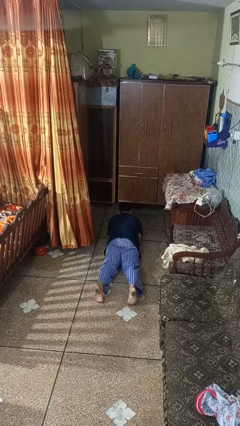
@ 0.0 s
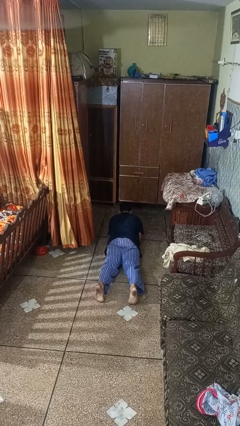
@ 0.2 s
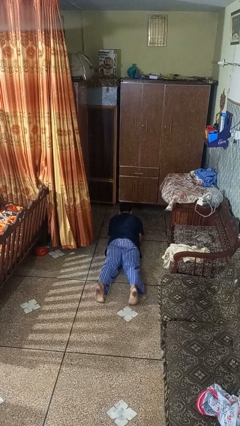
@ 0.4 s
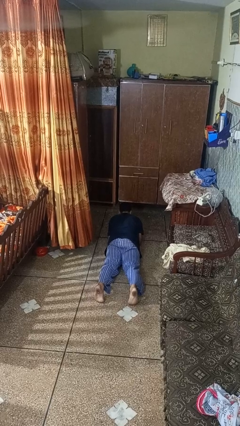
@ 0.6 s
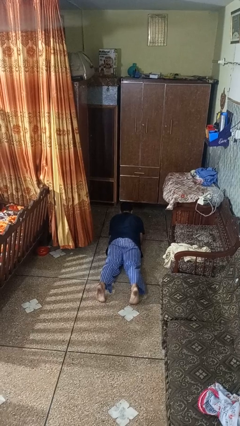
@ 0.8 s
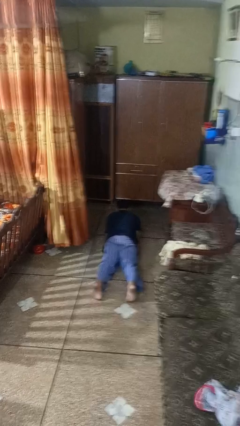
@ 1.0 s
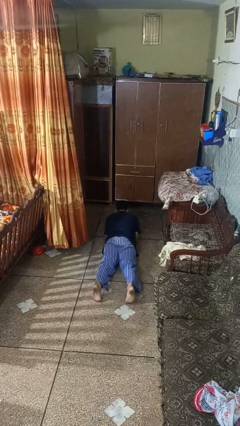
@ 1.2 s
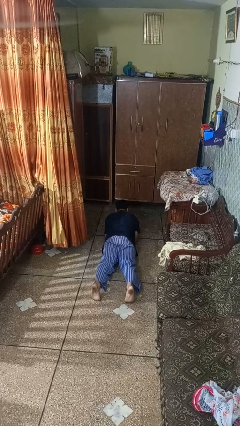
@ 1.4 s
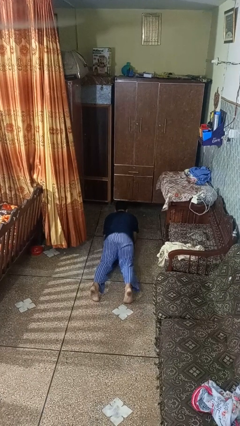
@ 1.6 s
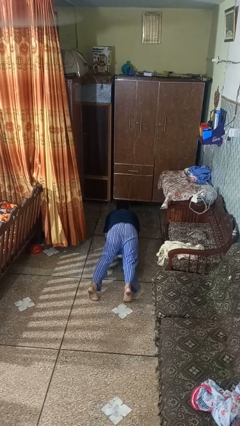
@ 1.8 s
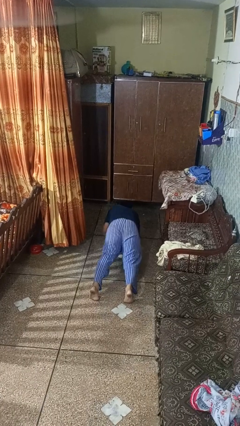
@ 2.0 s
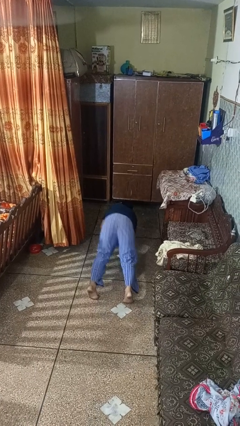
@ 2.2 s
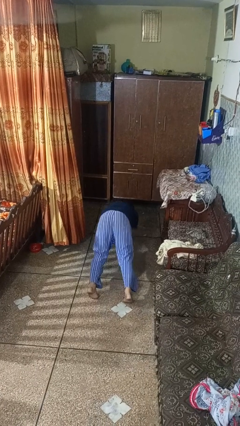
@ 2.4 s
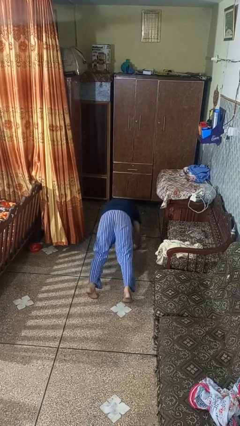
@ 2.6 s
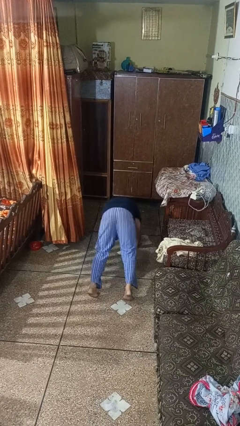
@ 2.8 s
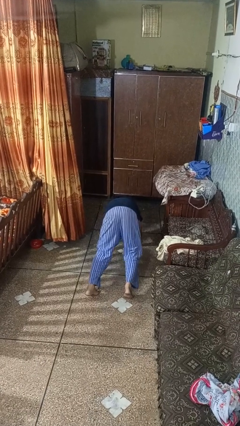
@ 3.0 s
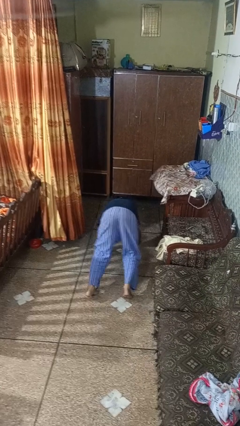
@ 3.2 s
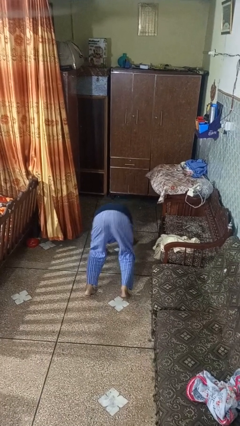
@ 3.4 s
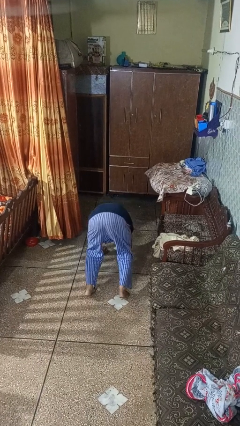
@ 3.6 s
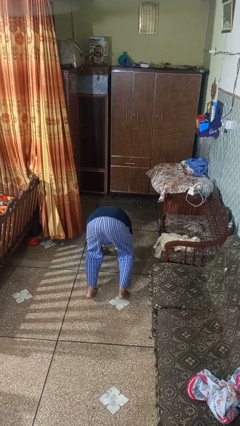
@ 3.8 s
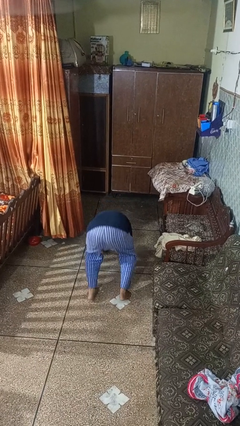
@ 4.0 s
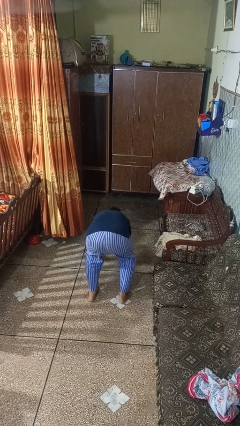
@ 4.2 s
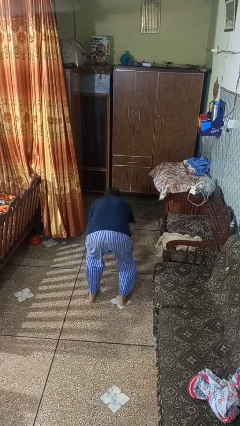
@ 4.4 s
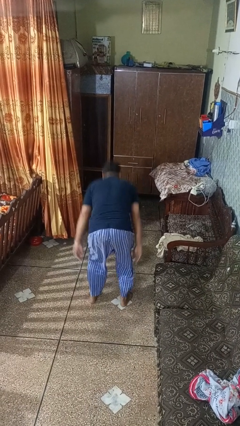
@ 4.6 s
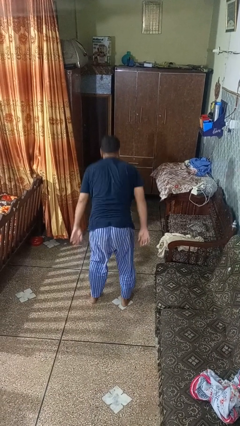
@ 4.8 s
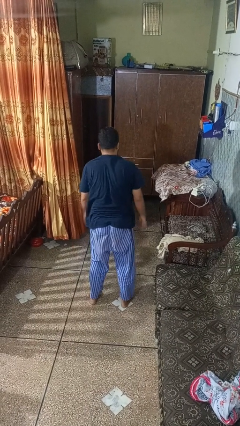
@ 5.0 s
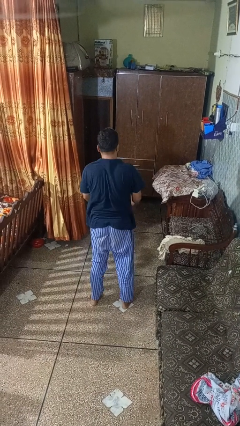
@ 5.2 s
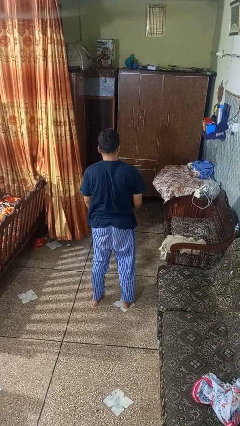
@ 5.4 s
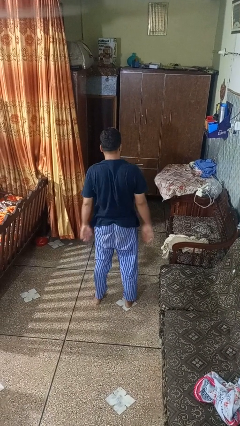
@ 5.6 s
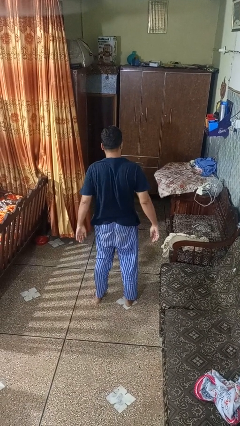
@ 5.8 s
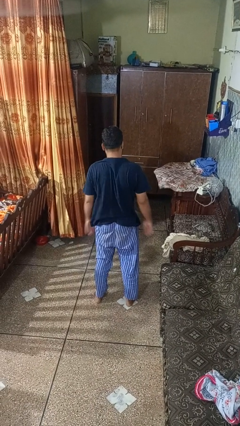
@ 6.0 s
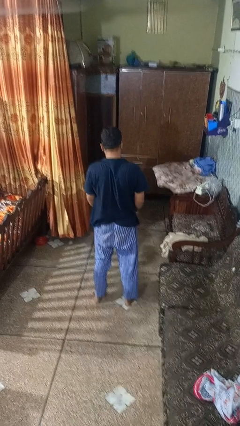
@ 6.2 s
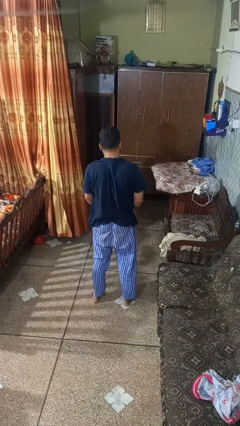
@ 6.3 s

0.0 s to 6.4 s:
person stands up from floor

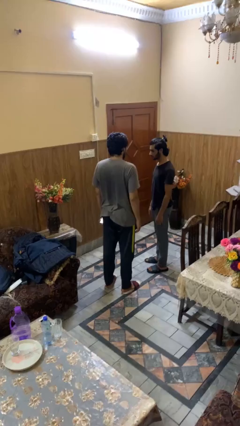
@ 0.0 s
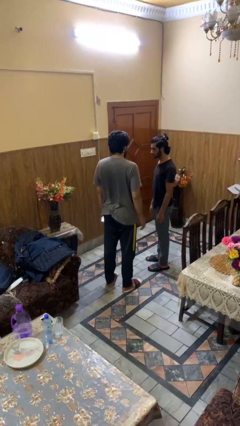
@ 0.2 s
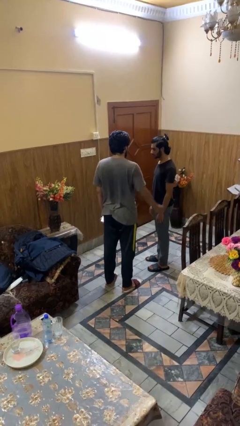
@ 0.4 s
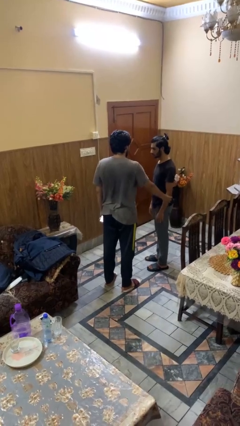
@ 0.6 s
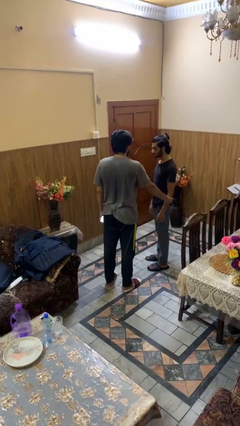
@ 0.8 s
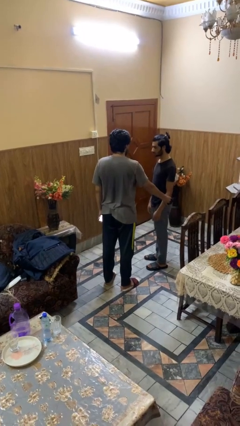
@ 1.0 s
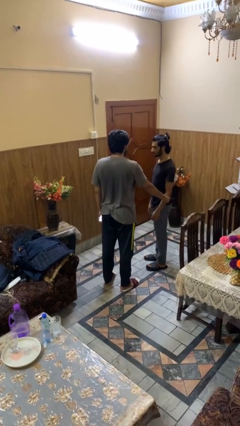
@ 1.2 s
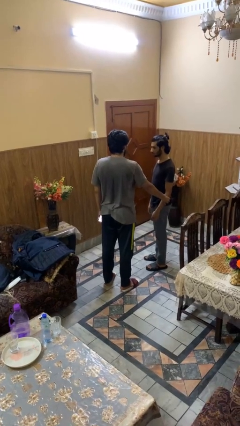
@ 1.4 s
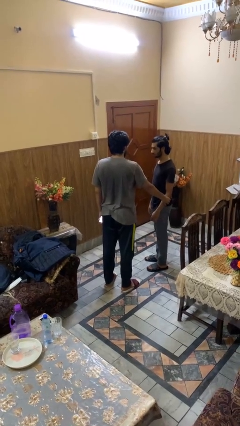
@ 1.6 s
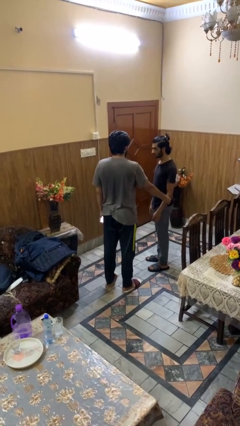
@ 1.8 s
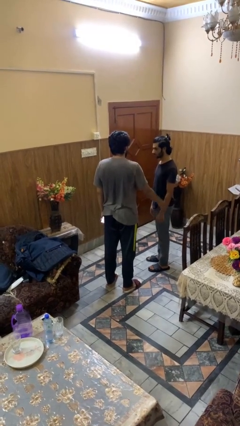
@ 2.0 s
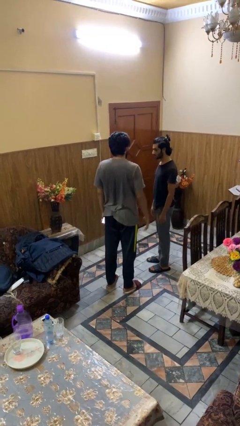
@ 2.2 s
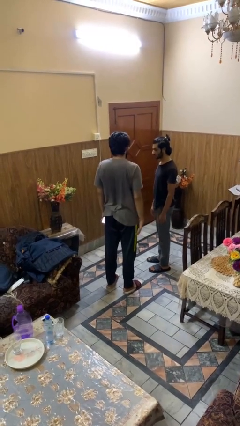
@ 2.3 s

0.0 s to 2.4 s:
person grabs person by forearm

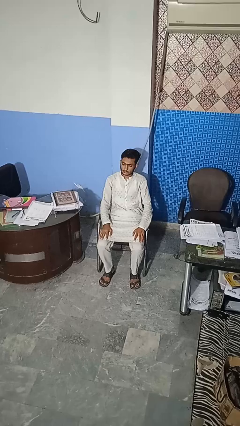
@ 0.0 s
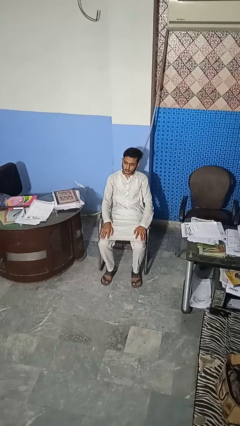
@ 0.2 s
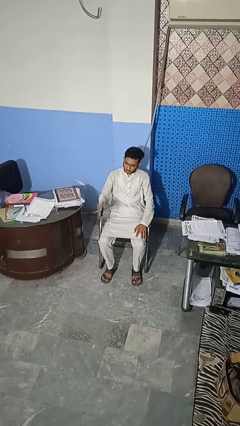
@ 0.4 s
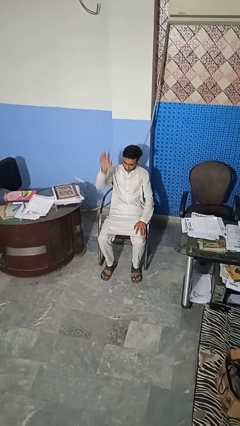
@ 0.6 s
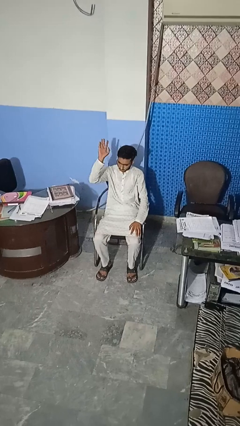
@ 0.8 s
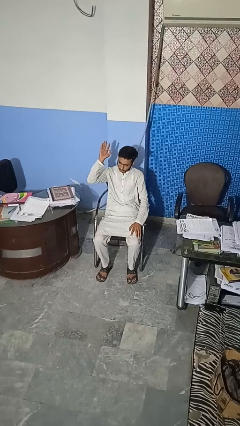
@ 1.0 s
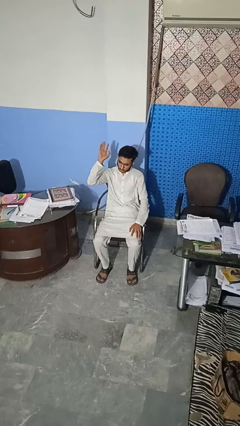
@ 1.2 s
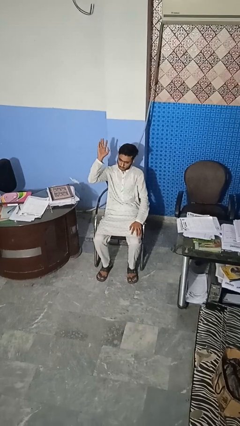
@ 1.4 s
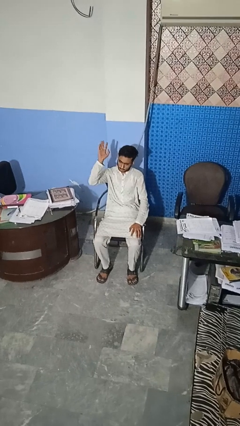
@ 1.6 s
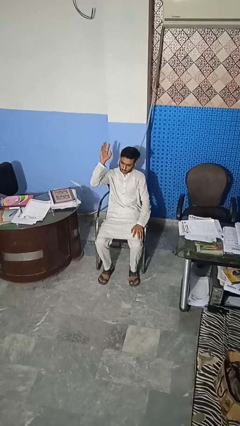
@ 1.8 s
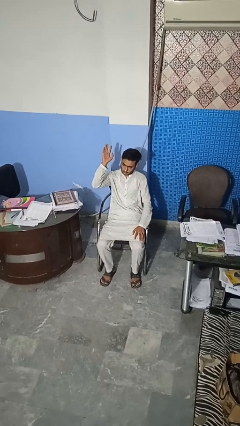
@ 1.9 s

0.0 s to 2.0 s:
person gestures raise hand

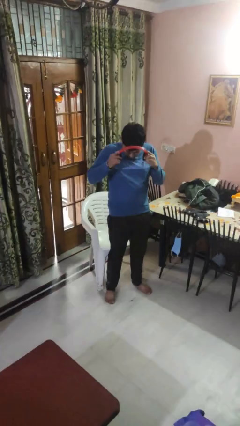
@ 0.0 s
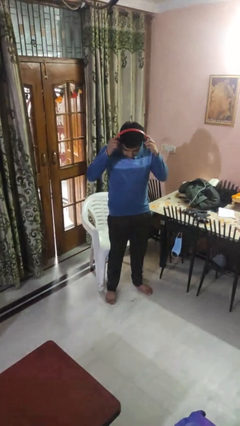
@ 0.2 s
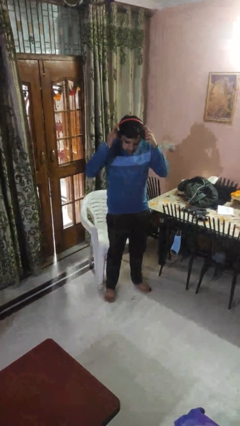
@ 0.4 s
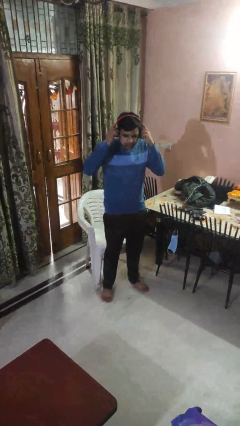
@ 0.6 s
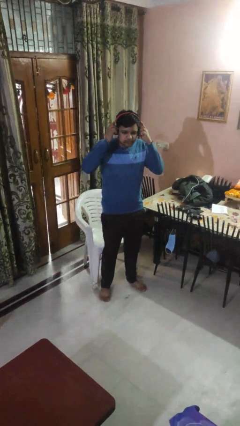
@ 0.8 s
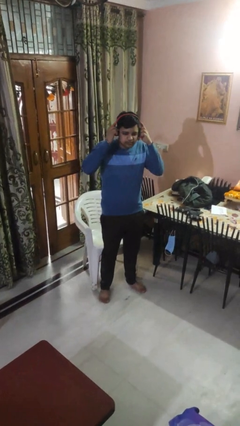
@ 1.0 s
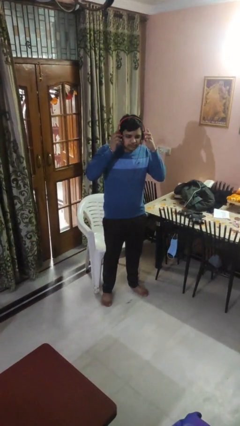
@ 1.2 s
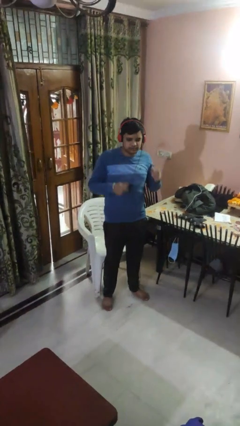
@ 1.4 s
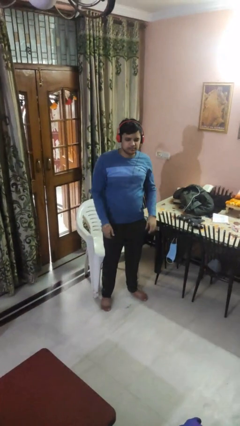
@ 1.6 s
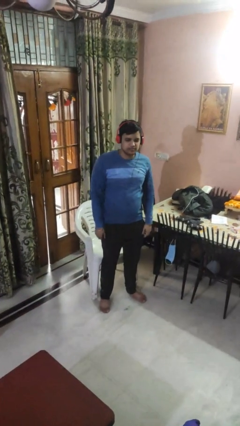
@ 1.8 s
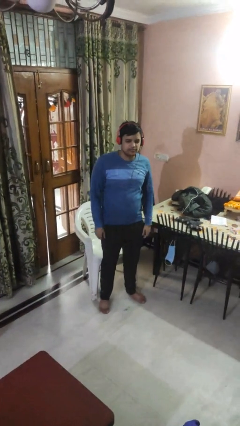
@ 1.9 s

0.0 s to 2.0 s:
person puts on headphones

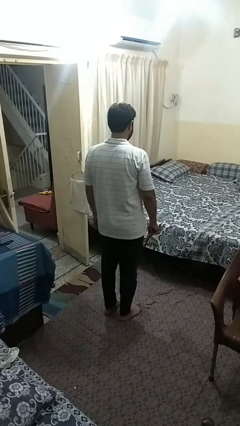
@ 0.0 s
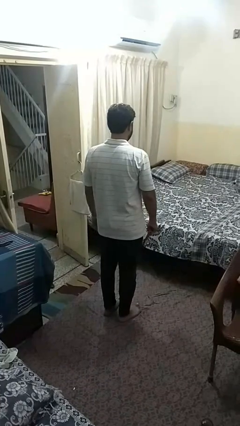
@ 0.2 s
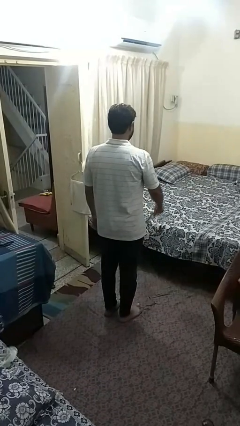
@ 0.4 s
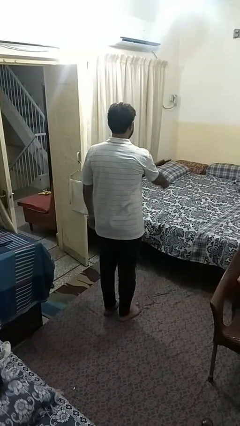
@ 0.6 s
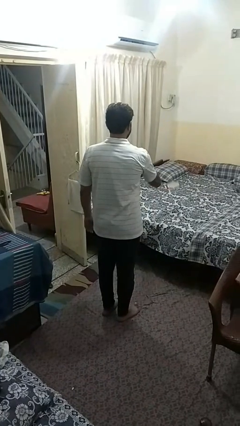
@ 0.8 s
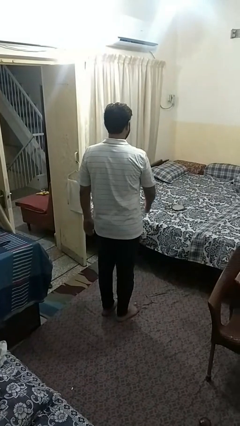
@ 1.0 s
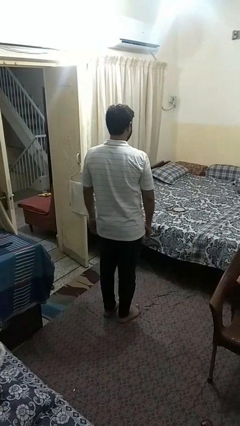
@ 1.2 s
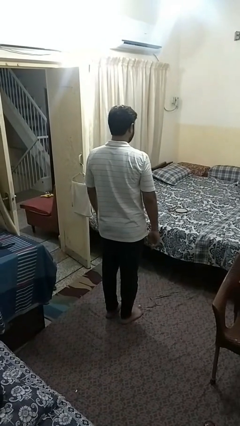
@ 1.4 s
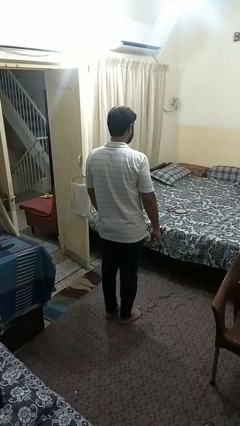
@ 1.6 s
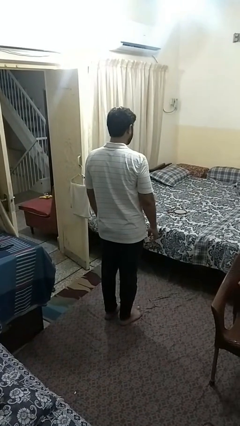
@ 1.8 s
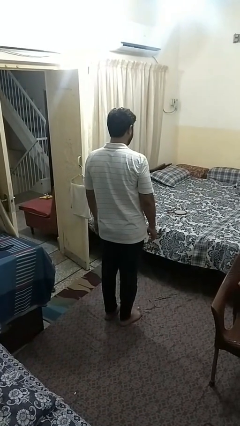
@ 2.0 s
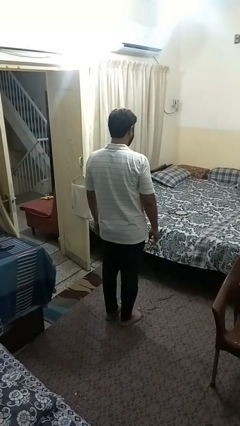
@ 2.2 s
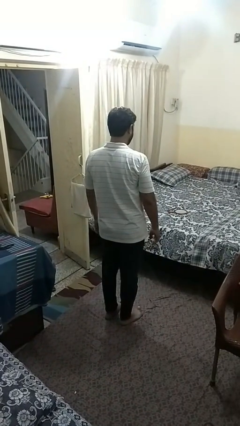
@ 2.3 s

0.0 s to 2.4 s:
person throws object on bed

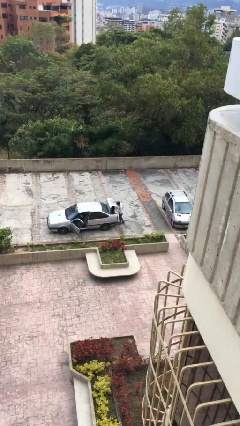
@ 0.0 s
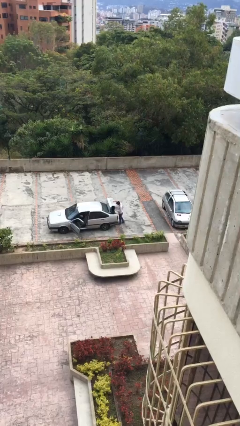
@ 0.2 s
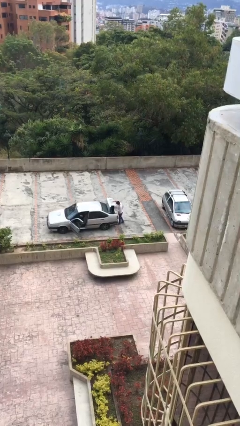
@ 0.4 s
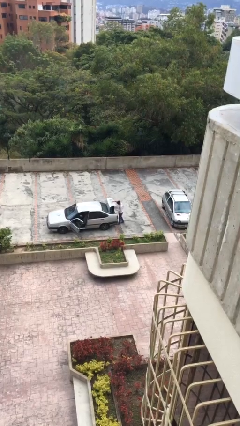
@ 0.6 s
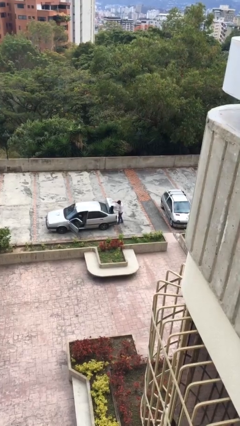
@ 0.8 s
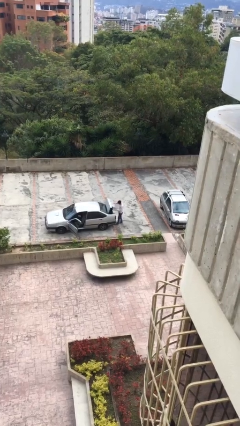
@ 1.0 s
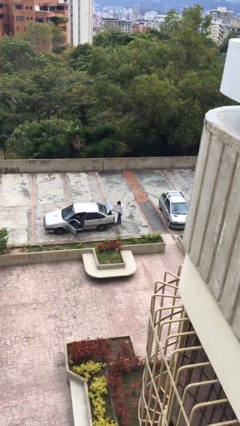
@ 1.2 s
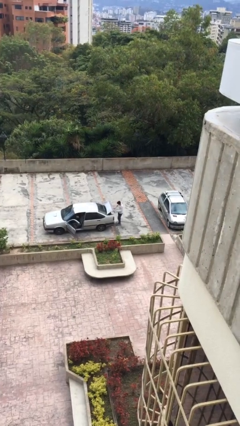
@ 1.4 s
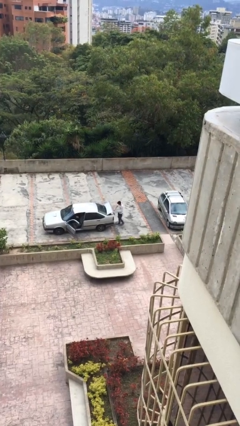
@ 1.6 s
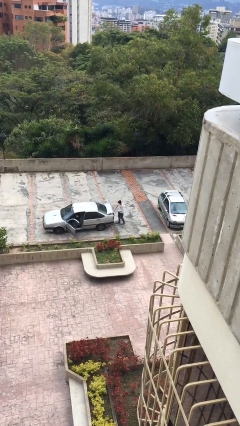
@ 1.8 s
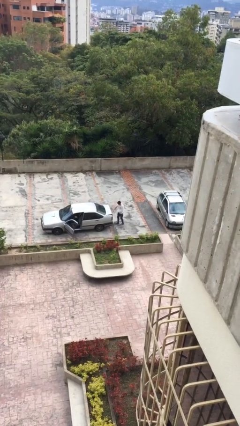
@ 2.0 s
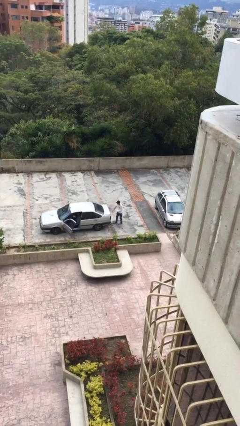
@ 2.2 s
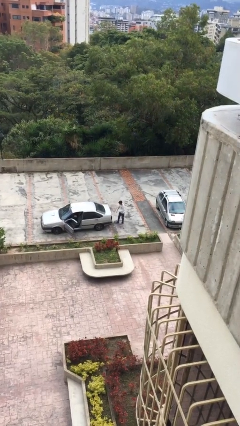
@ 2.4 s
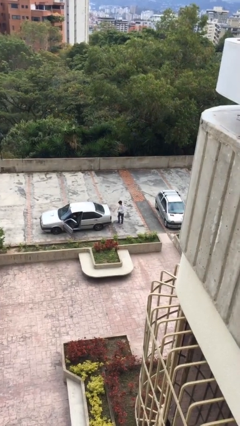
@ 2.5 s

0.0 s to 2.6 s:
person closes car trunk
